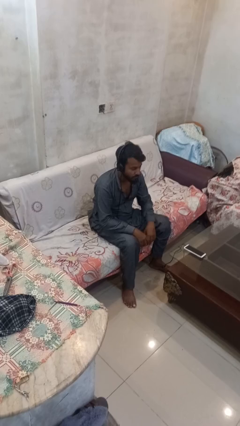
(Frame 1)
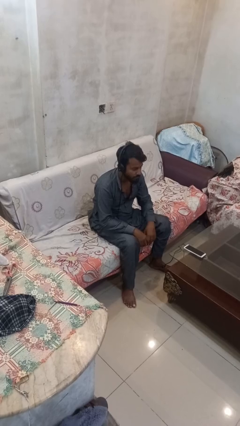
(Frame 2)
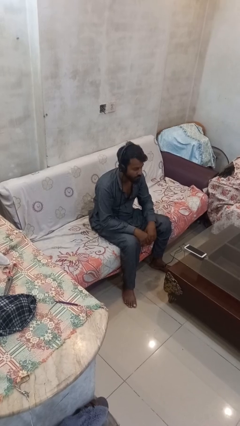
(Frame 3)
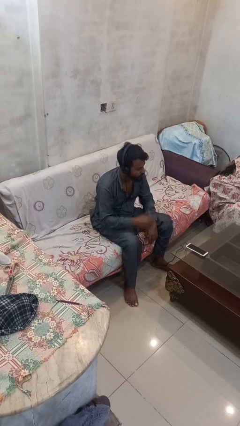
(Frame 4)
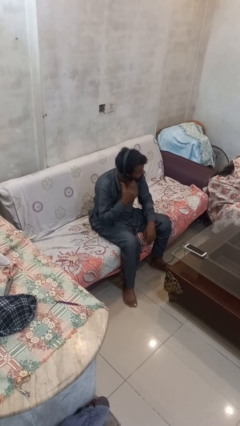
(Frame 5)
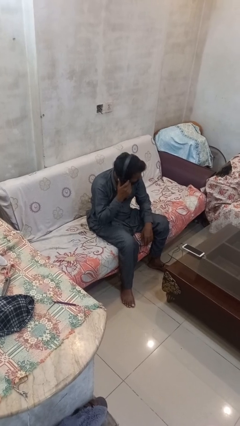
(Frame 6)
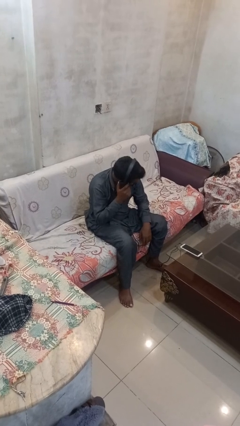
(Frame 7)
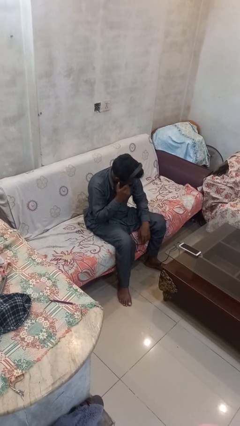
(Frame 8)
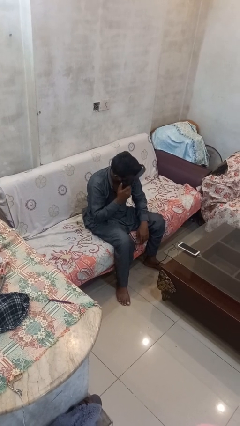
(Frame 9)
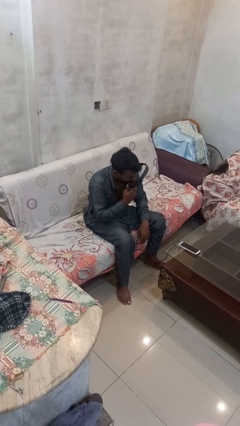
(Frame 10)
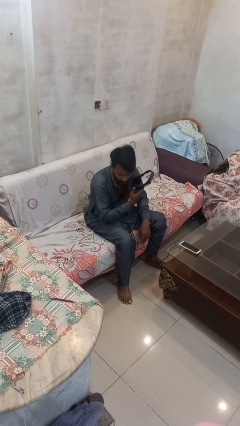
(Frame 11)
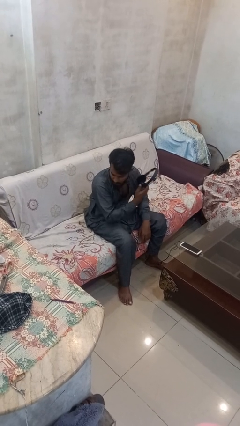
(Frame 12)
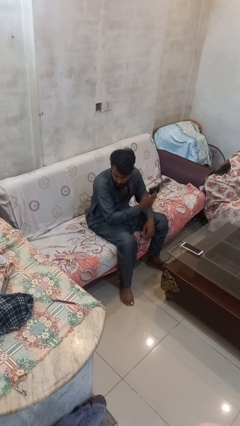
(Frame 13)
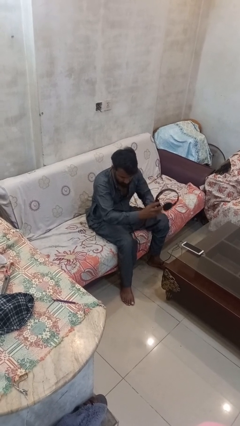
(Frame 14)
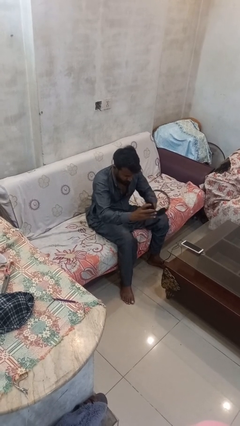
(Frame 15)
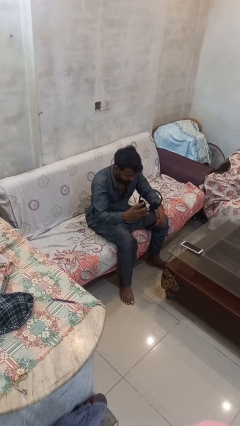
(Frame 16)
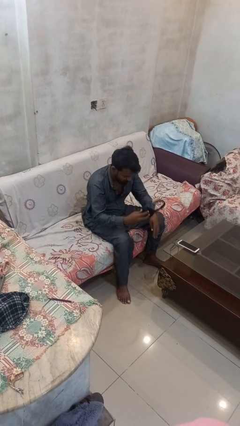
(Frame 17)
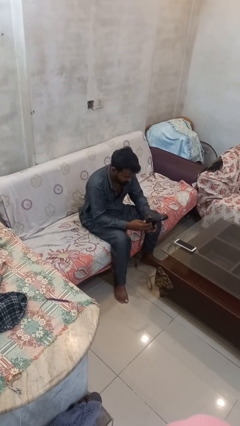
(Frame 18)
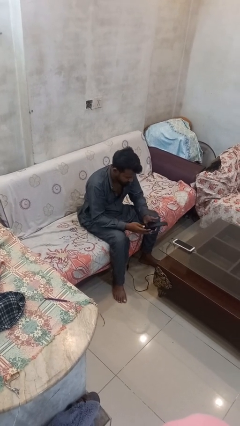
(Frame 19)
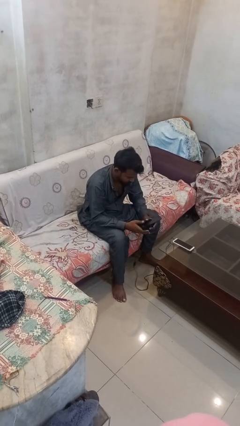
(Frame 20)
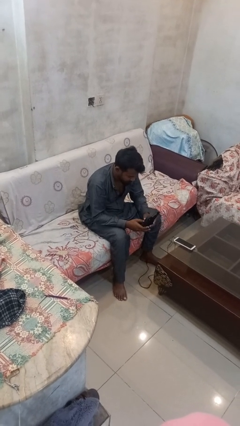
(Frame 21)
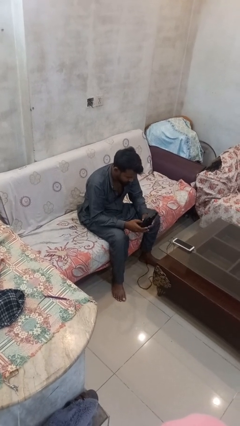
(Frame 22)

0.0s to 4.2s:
person takes off headphones

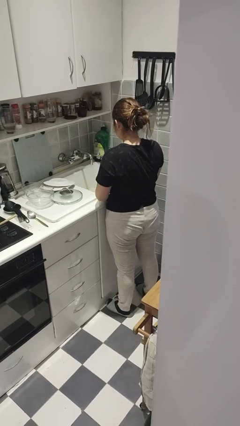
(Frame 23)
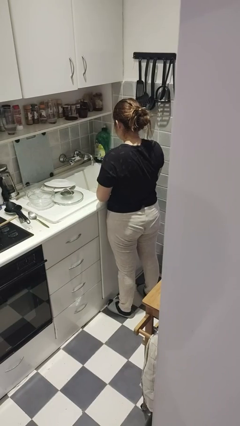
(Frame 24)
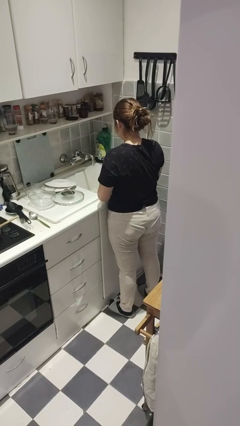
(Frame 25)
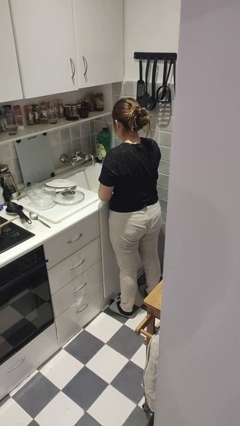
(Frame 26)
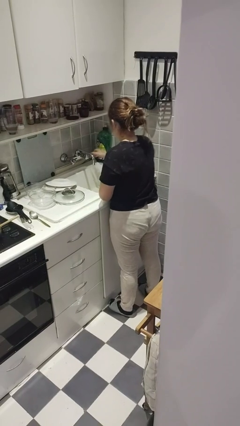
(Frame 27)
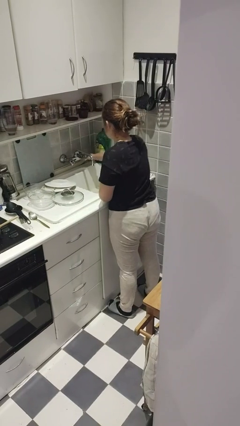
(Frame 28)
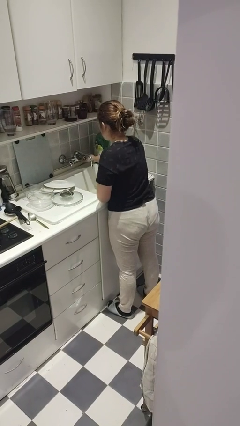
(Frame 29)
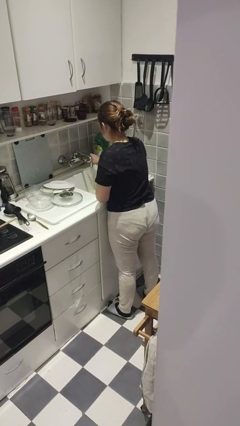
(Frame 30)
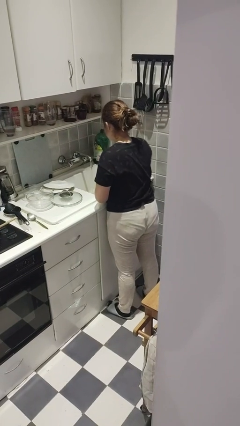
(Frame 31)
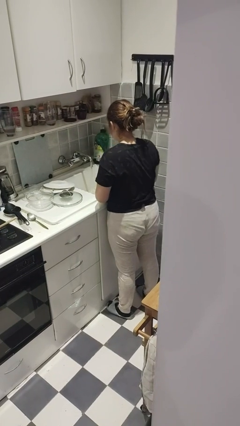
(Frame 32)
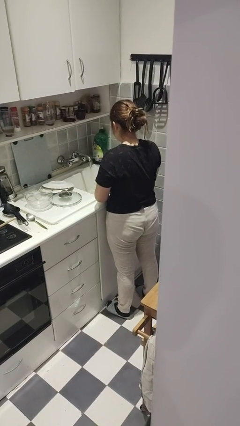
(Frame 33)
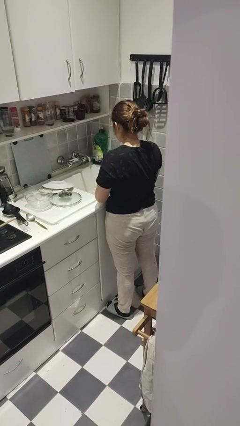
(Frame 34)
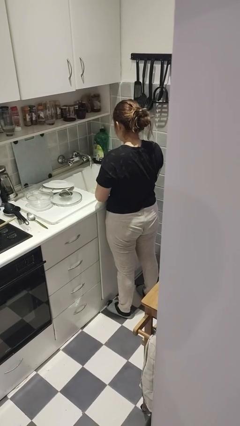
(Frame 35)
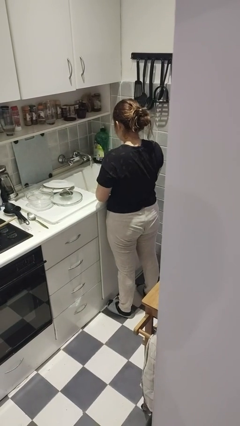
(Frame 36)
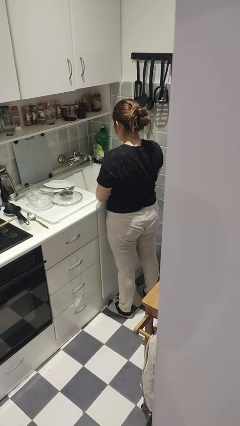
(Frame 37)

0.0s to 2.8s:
person turns on faucet

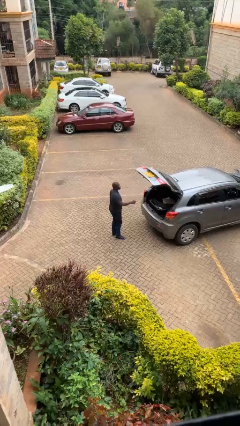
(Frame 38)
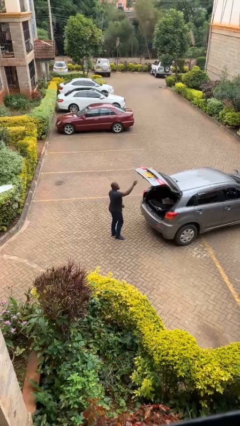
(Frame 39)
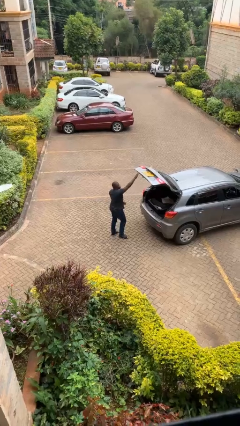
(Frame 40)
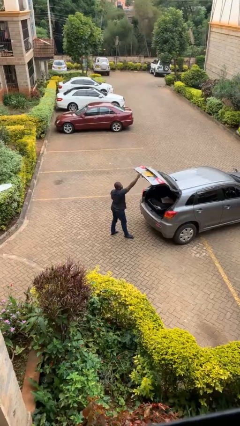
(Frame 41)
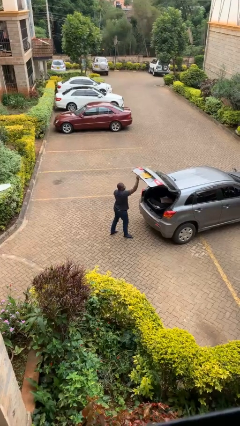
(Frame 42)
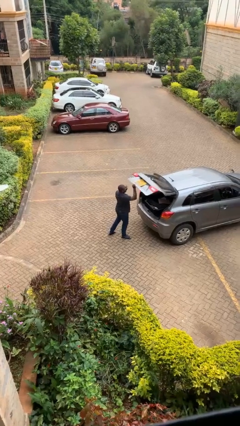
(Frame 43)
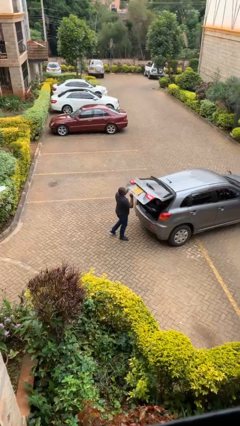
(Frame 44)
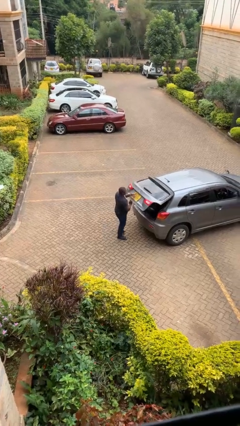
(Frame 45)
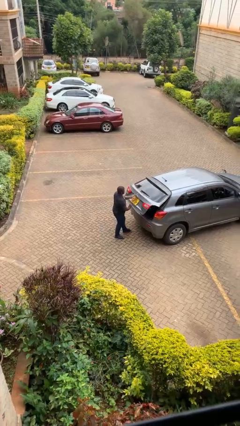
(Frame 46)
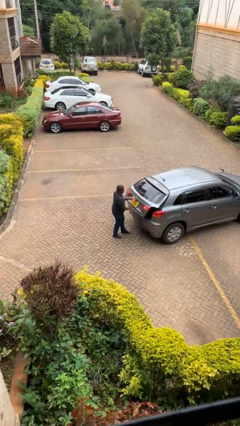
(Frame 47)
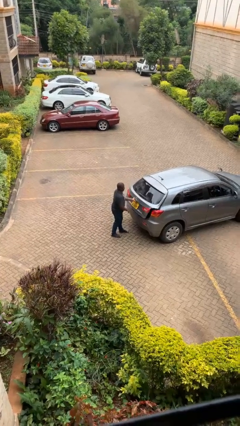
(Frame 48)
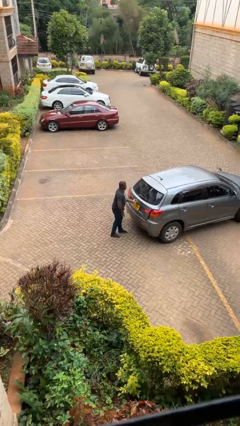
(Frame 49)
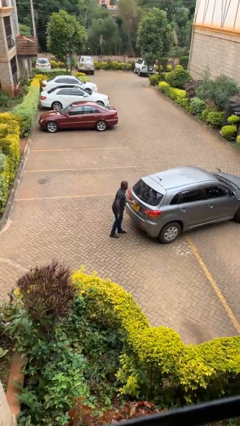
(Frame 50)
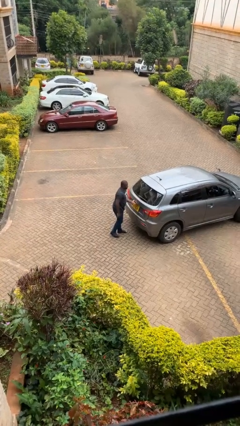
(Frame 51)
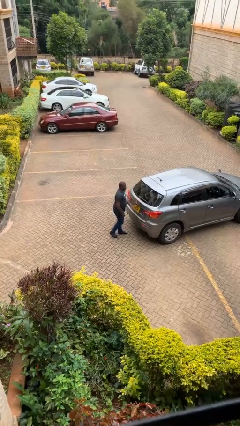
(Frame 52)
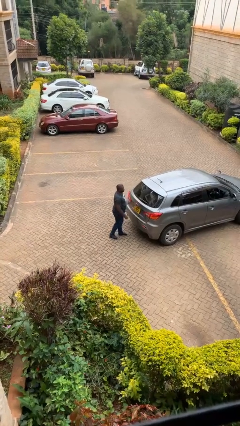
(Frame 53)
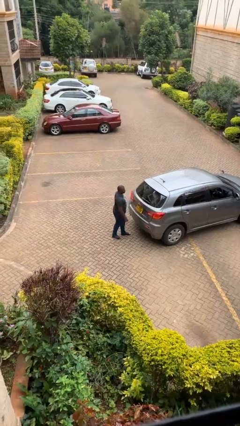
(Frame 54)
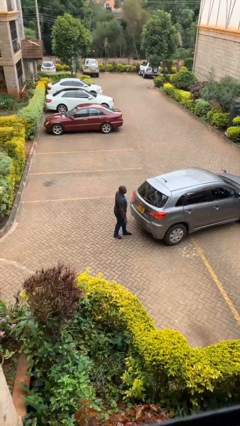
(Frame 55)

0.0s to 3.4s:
person closes car trunk

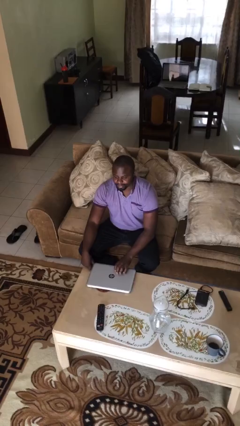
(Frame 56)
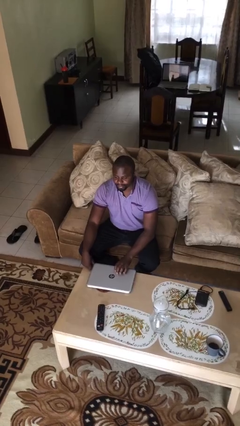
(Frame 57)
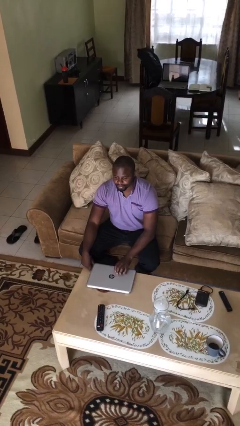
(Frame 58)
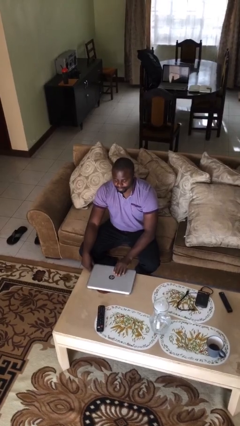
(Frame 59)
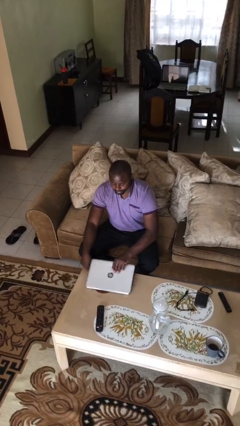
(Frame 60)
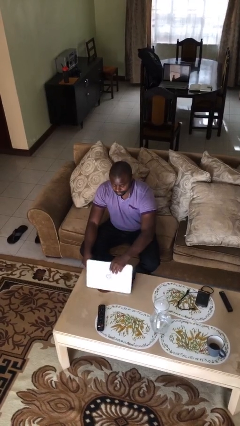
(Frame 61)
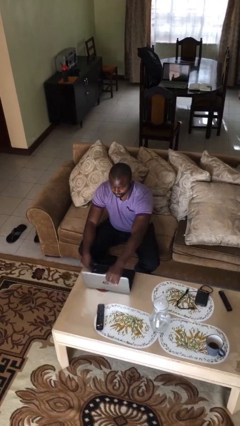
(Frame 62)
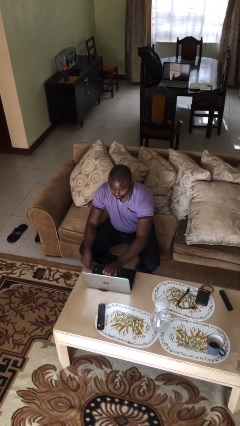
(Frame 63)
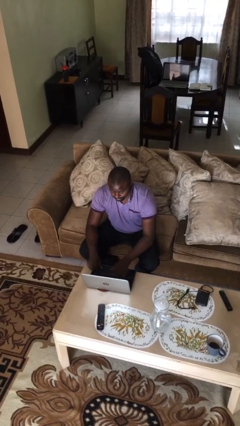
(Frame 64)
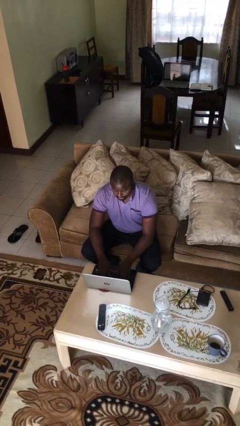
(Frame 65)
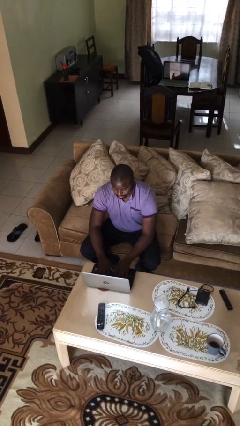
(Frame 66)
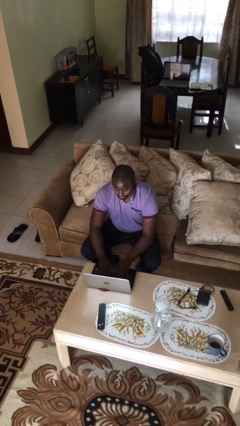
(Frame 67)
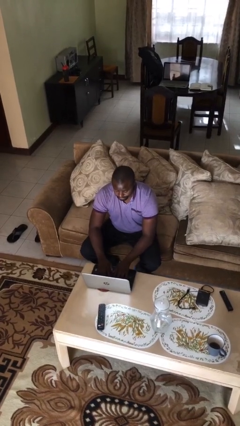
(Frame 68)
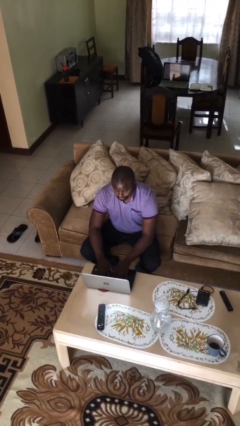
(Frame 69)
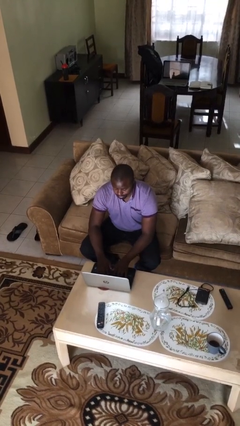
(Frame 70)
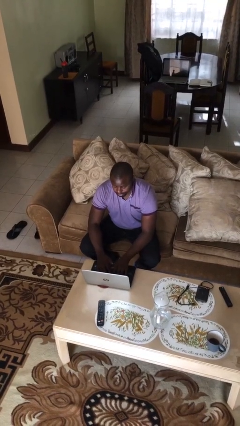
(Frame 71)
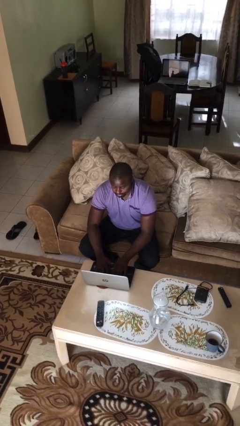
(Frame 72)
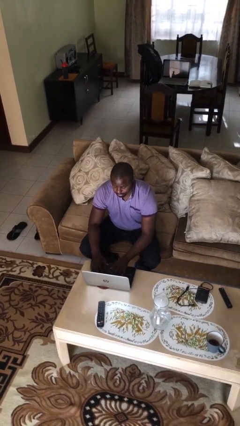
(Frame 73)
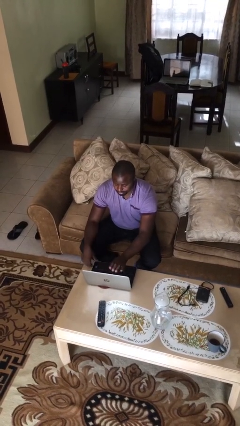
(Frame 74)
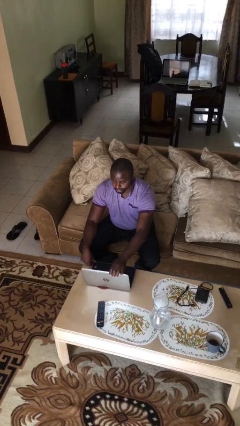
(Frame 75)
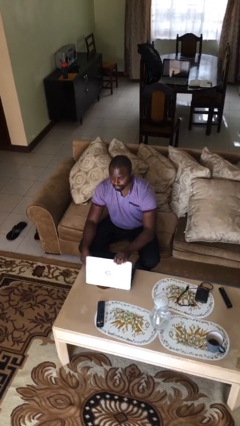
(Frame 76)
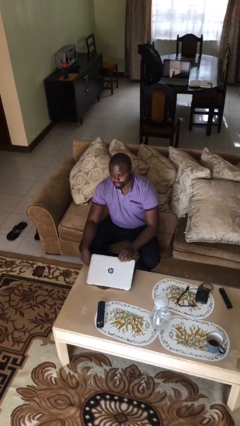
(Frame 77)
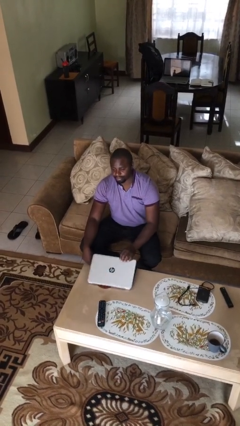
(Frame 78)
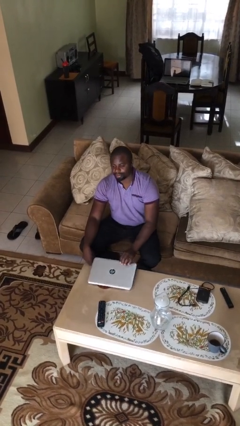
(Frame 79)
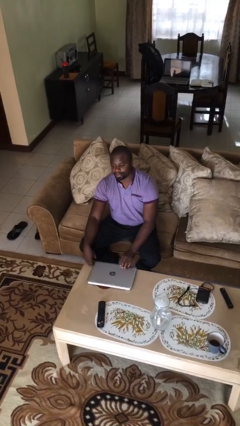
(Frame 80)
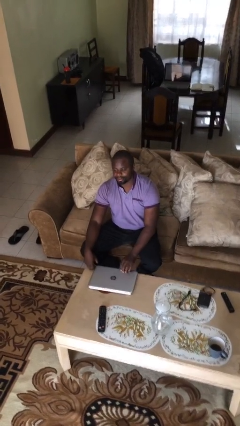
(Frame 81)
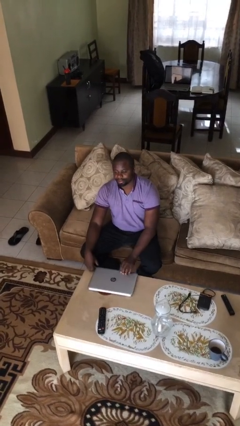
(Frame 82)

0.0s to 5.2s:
person interacts with laptop

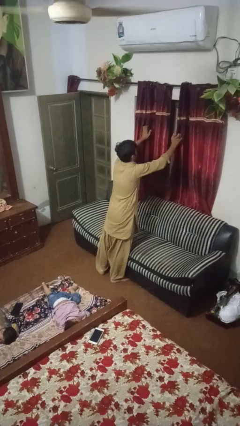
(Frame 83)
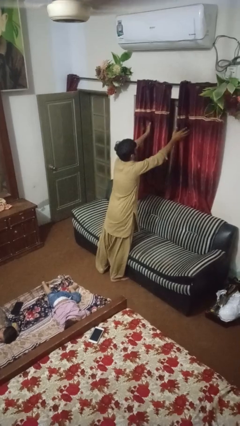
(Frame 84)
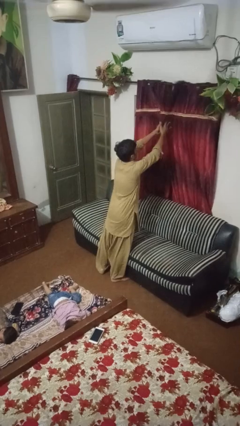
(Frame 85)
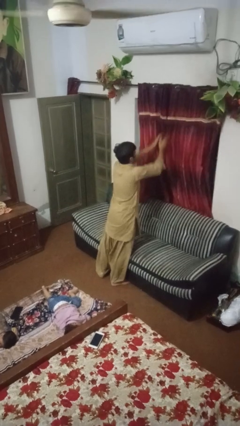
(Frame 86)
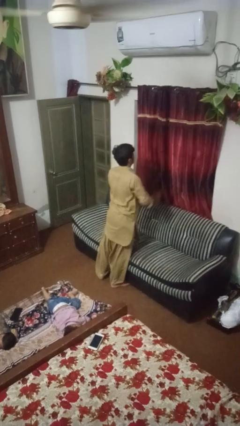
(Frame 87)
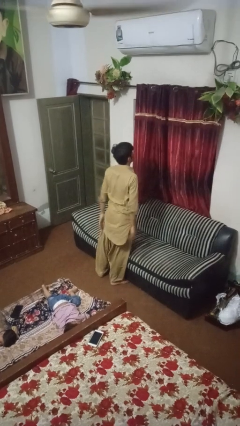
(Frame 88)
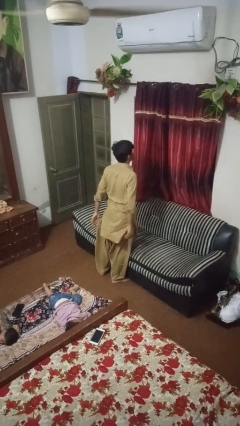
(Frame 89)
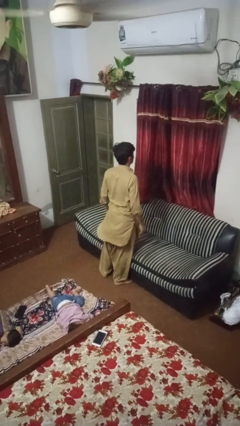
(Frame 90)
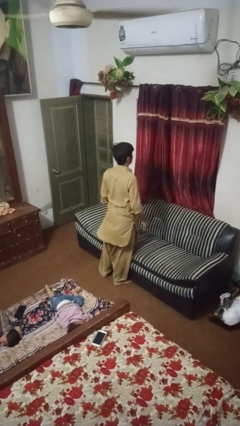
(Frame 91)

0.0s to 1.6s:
person closes curtains

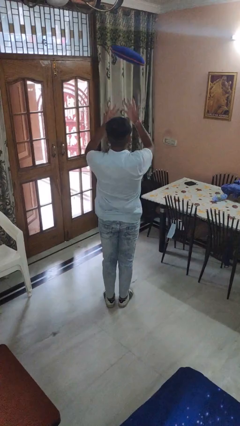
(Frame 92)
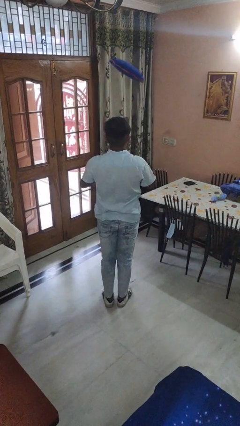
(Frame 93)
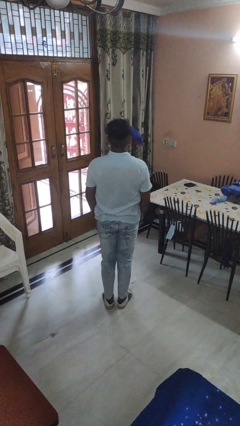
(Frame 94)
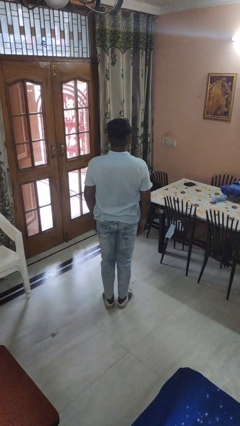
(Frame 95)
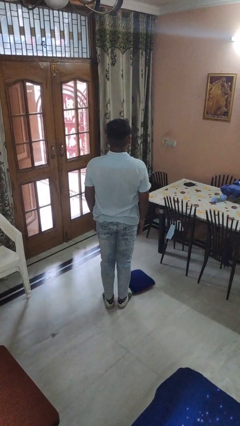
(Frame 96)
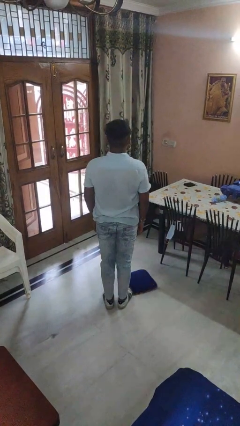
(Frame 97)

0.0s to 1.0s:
person throws object into air
